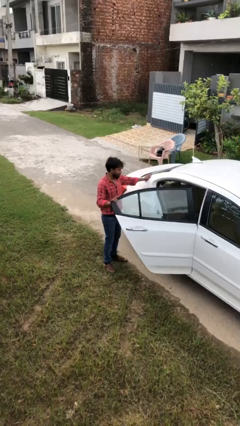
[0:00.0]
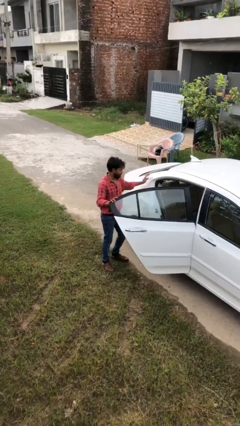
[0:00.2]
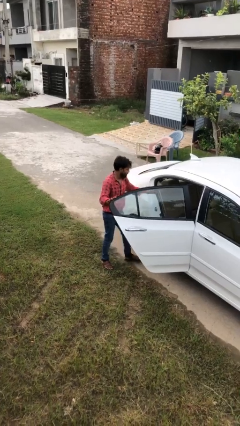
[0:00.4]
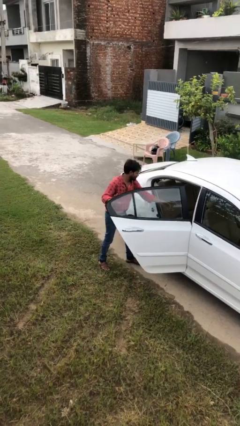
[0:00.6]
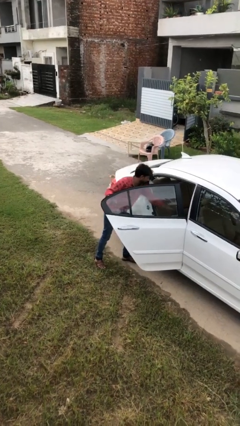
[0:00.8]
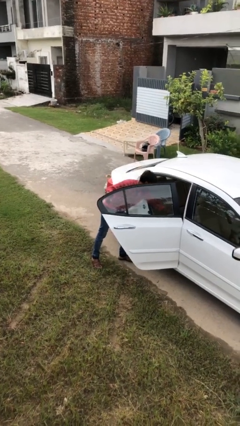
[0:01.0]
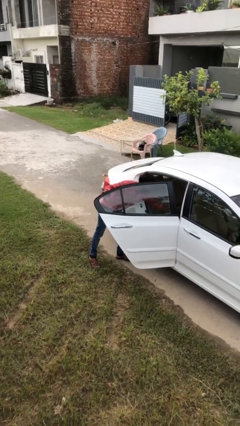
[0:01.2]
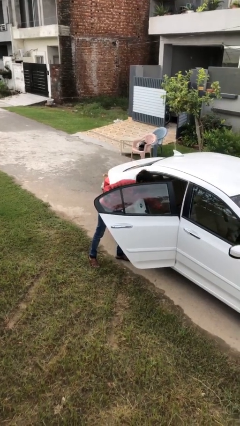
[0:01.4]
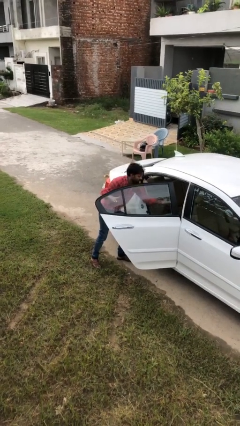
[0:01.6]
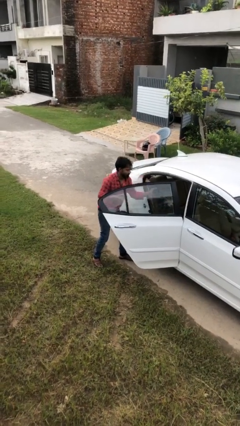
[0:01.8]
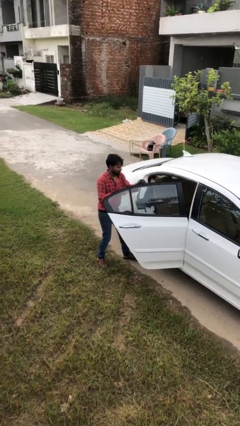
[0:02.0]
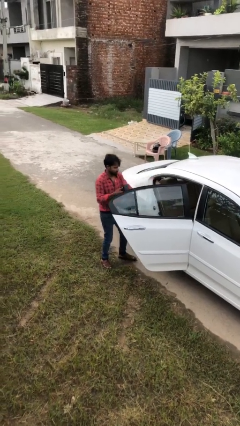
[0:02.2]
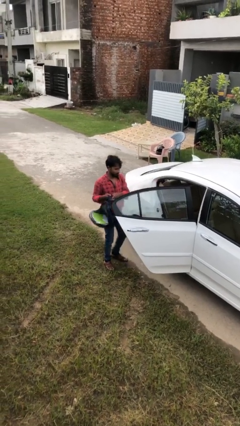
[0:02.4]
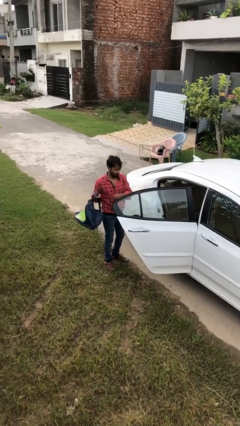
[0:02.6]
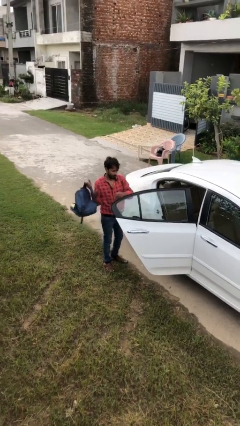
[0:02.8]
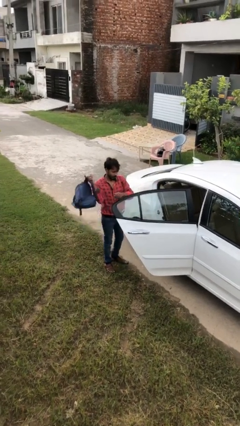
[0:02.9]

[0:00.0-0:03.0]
person unloads car

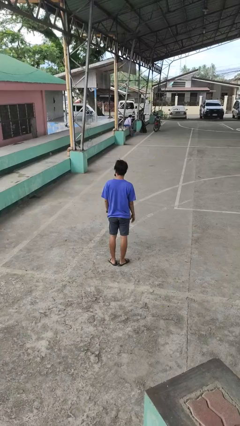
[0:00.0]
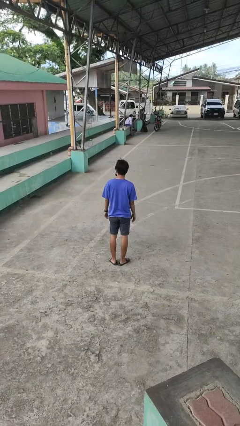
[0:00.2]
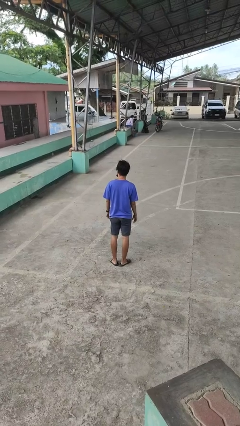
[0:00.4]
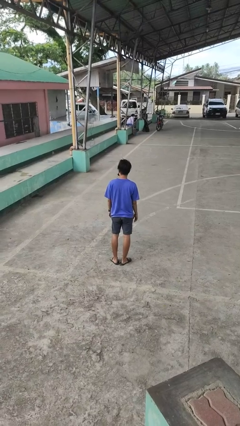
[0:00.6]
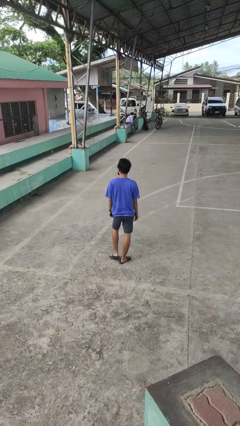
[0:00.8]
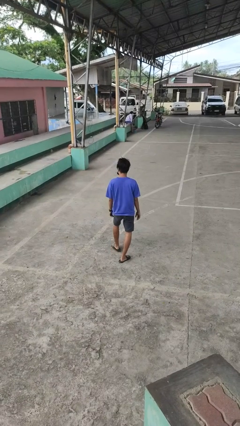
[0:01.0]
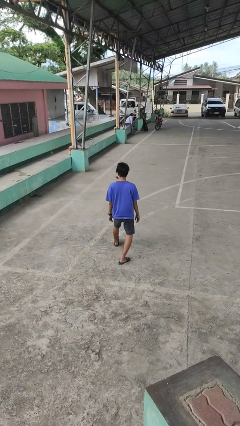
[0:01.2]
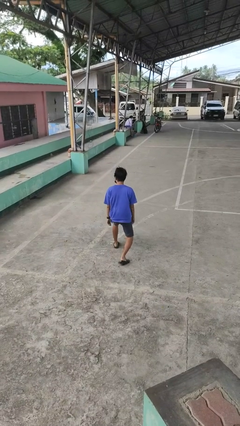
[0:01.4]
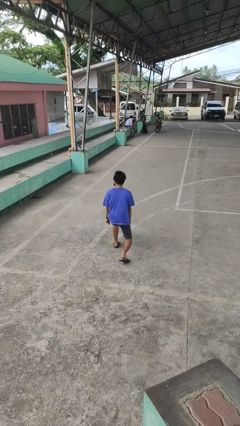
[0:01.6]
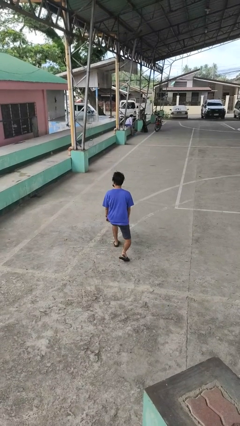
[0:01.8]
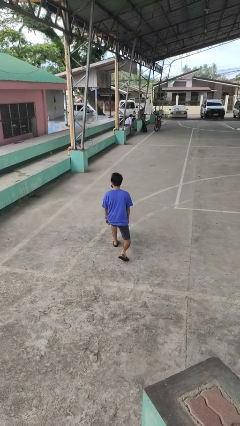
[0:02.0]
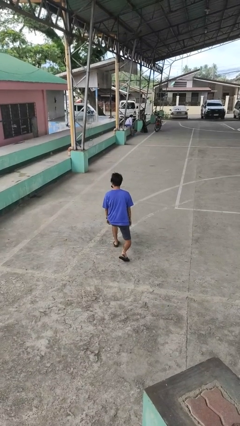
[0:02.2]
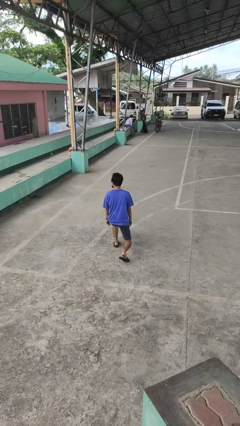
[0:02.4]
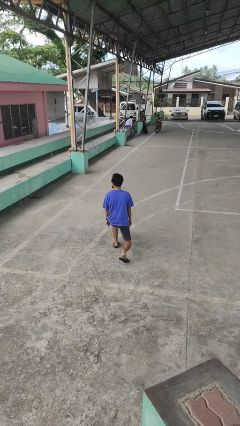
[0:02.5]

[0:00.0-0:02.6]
person exercises with lunges

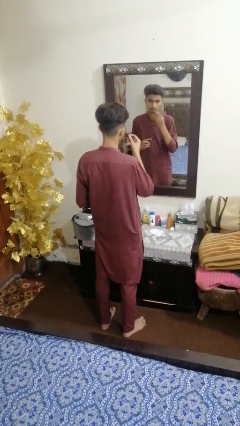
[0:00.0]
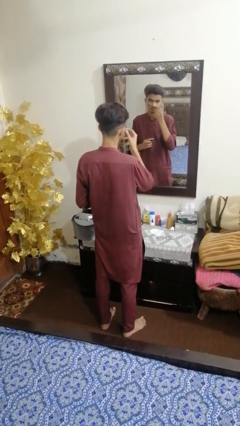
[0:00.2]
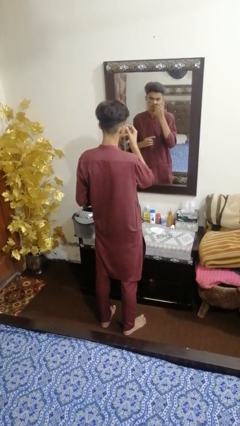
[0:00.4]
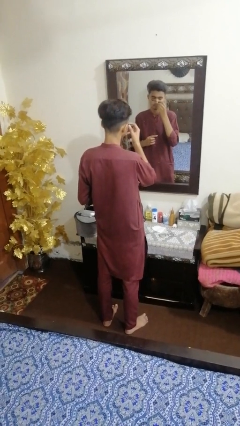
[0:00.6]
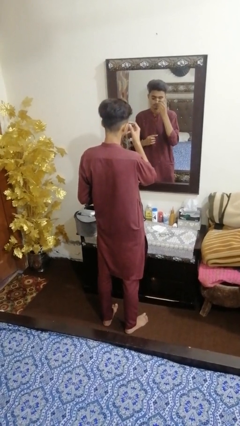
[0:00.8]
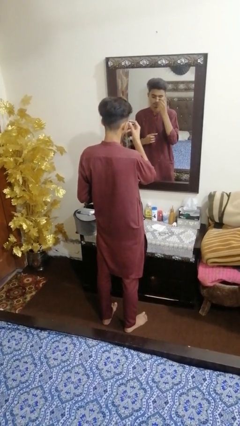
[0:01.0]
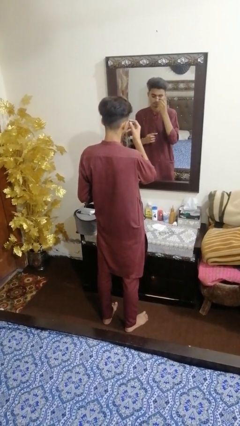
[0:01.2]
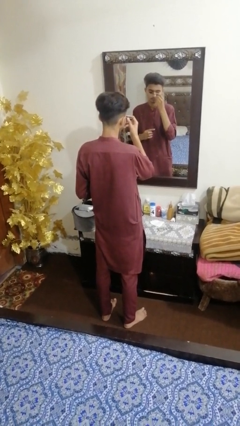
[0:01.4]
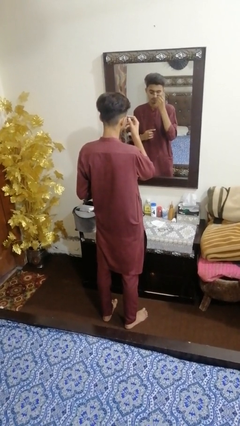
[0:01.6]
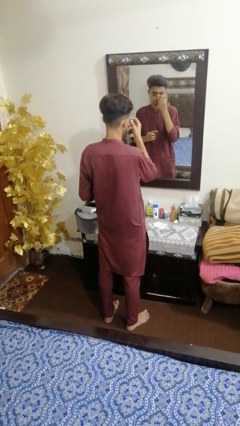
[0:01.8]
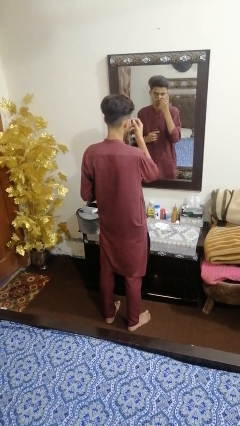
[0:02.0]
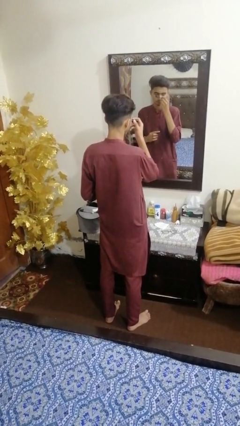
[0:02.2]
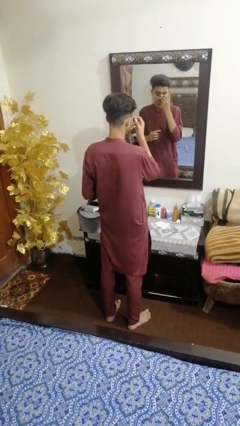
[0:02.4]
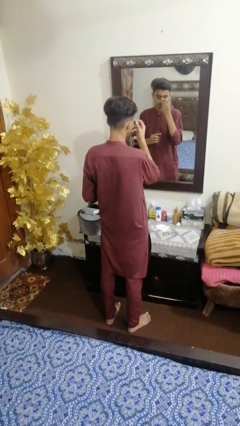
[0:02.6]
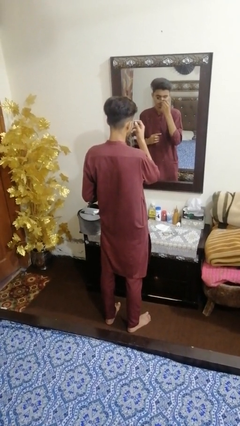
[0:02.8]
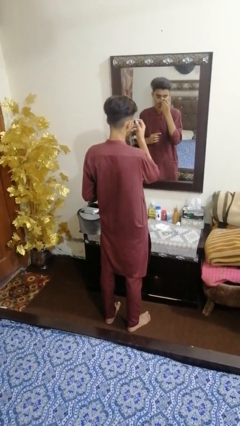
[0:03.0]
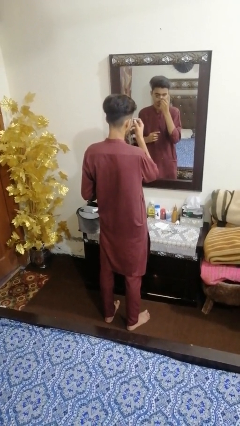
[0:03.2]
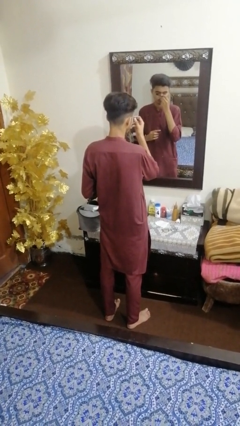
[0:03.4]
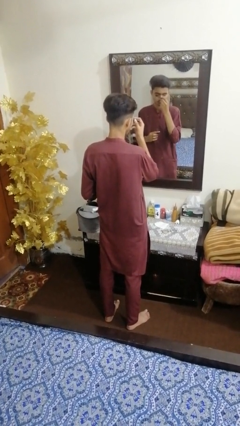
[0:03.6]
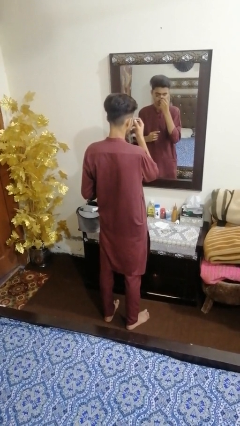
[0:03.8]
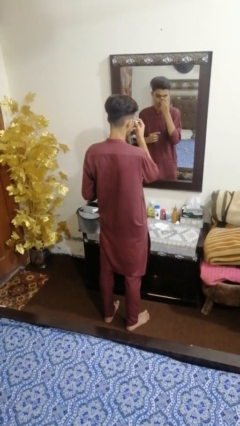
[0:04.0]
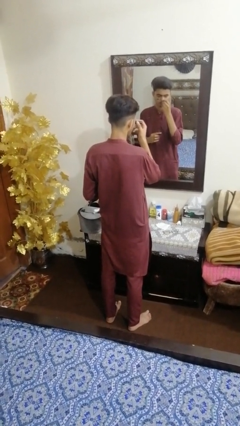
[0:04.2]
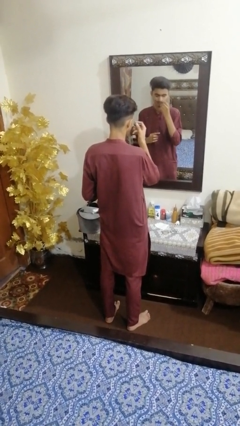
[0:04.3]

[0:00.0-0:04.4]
person applies eye makeup

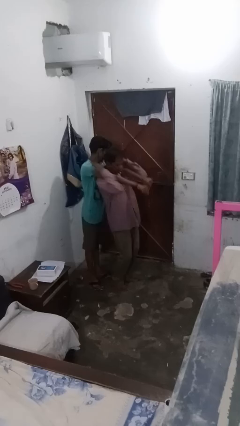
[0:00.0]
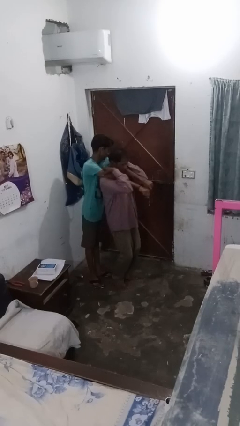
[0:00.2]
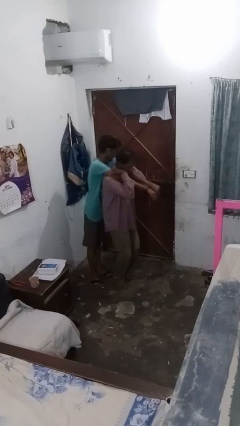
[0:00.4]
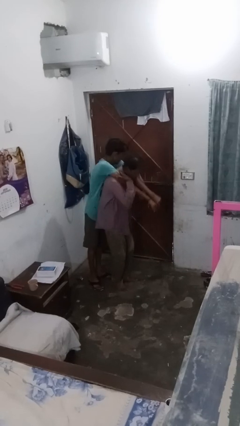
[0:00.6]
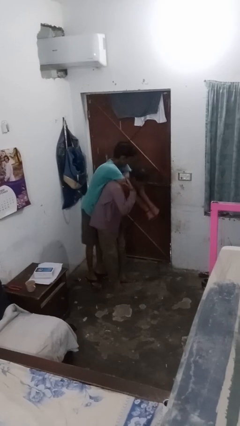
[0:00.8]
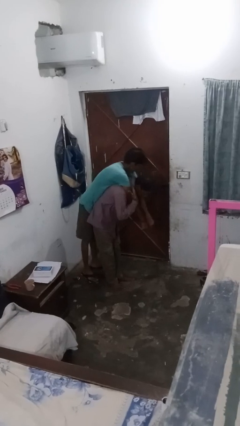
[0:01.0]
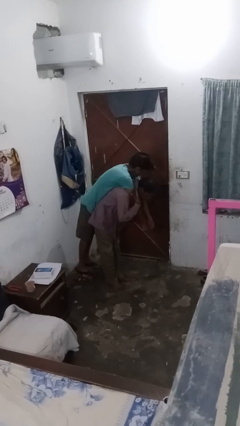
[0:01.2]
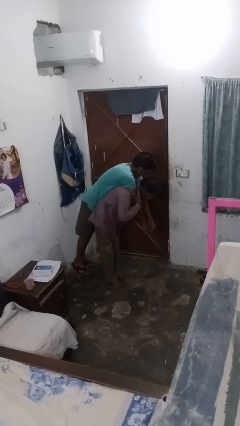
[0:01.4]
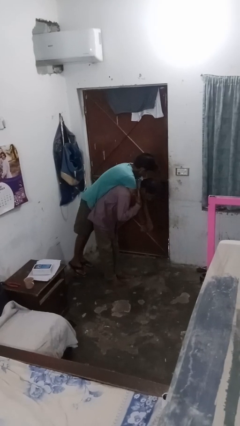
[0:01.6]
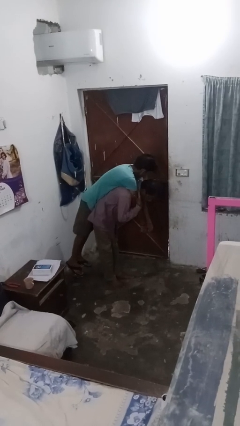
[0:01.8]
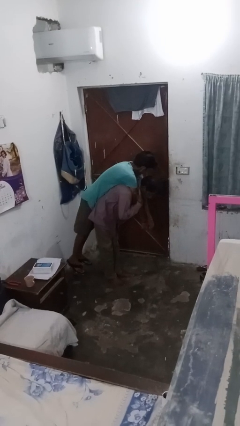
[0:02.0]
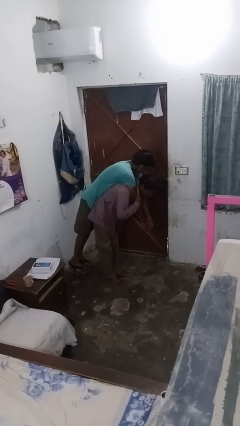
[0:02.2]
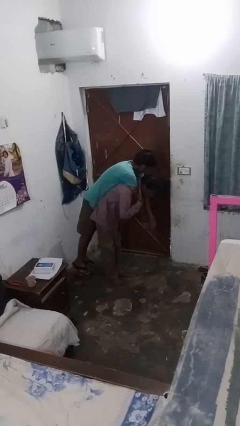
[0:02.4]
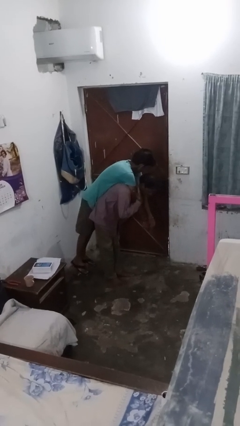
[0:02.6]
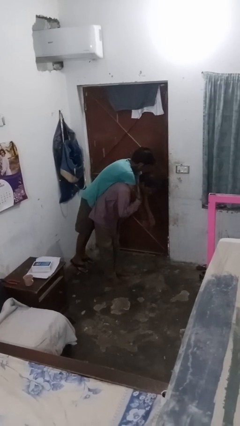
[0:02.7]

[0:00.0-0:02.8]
person carries person on shoulders

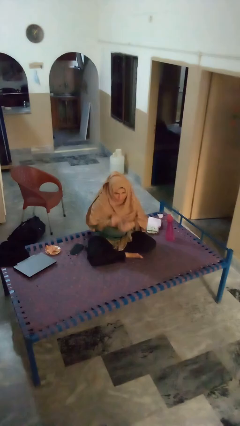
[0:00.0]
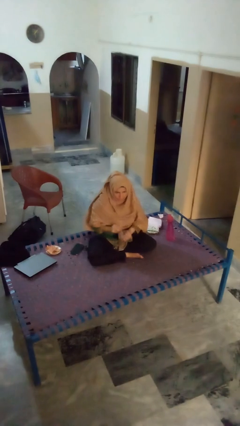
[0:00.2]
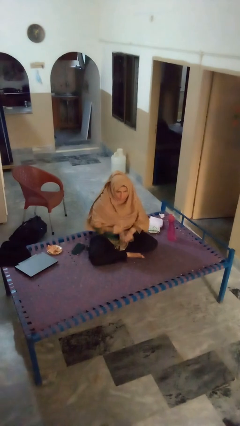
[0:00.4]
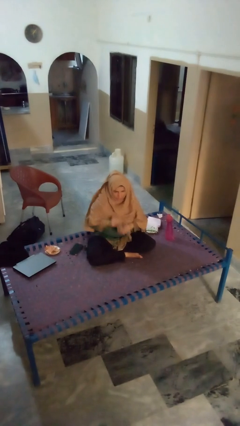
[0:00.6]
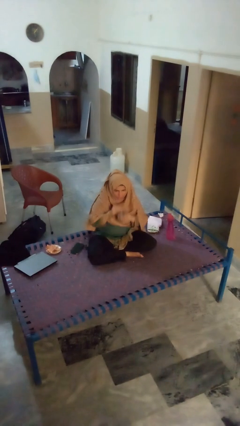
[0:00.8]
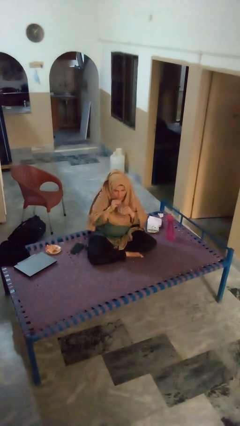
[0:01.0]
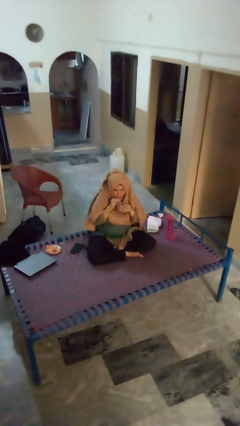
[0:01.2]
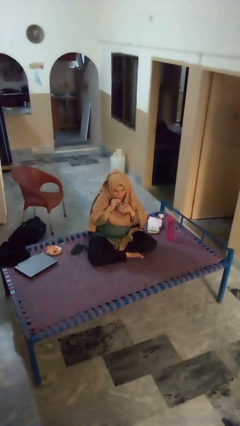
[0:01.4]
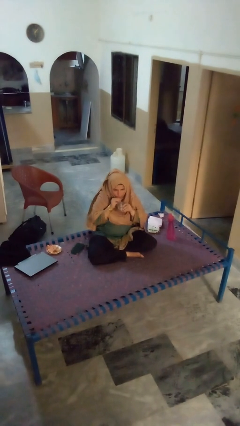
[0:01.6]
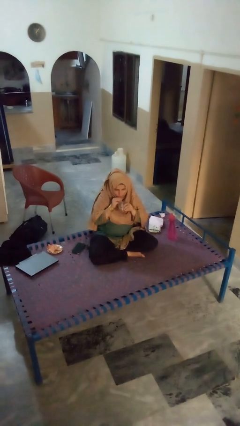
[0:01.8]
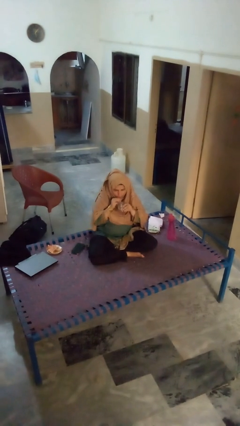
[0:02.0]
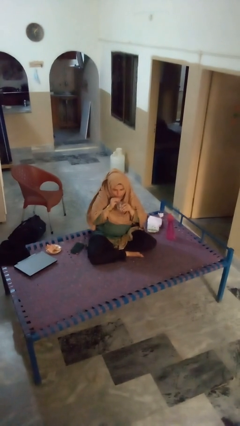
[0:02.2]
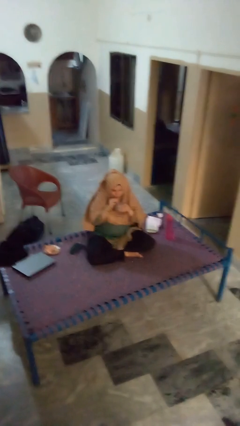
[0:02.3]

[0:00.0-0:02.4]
person drinks from straw

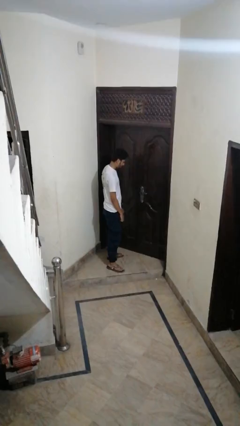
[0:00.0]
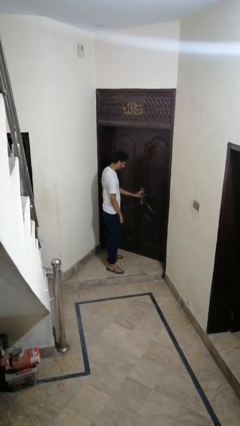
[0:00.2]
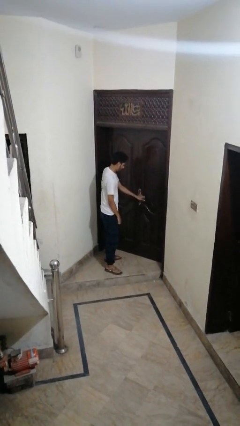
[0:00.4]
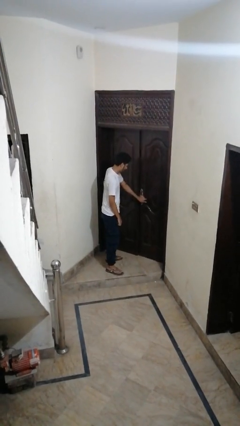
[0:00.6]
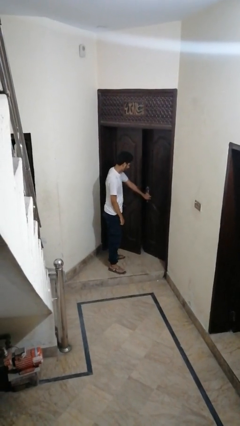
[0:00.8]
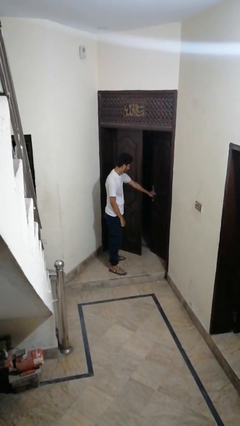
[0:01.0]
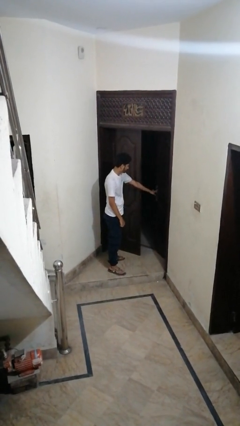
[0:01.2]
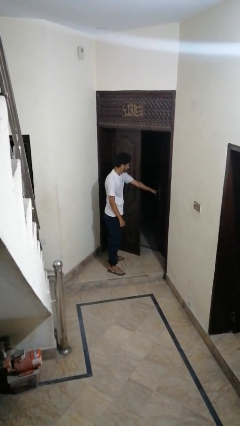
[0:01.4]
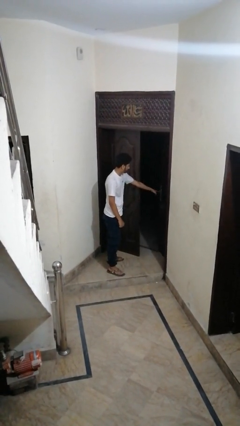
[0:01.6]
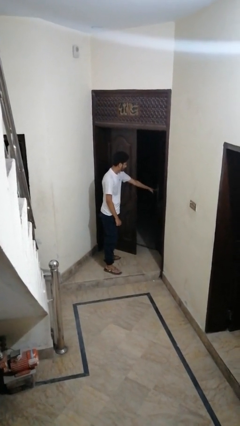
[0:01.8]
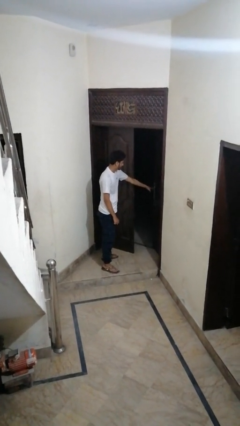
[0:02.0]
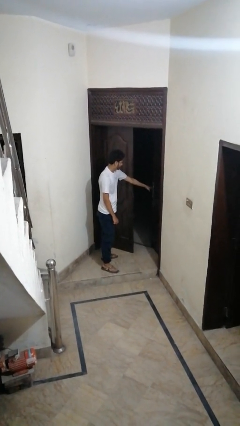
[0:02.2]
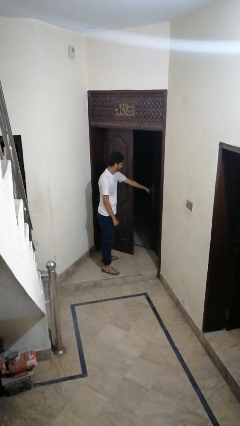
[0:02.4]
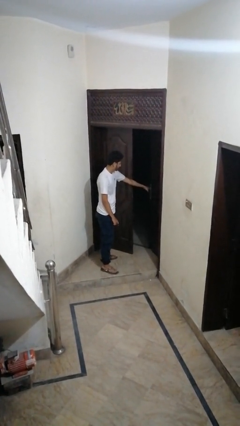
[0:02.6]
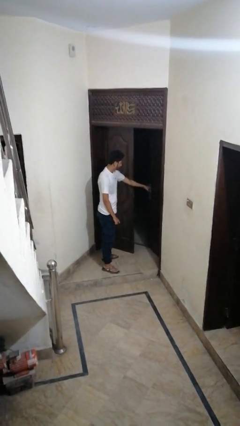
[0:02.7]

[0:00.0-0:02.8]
person opens facility door
